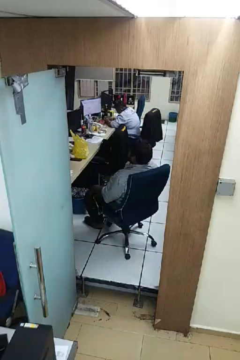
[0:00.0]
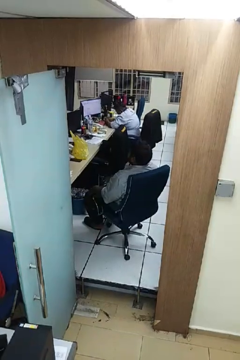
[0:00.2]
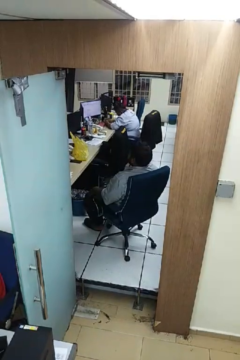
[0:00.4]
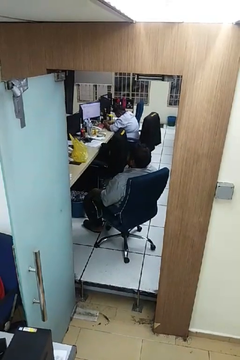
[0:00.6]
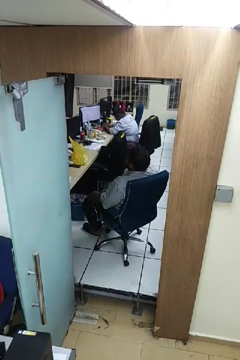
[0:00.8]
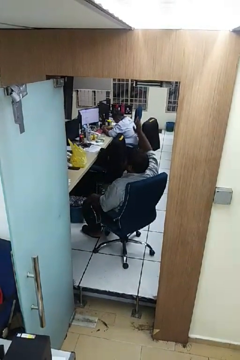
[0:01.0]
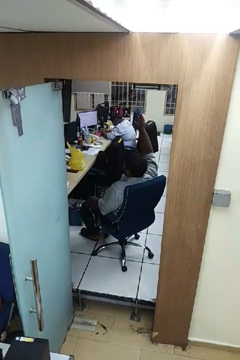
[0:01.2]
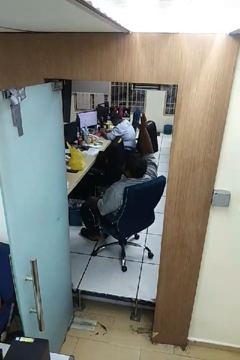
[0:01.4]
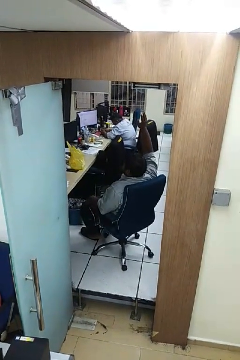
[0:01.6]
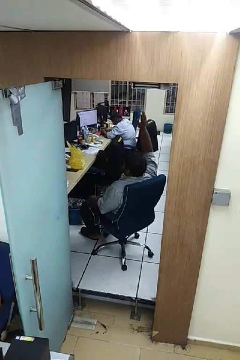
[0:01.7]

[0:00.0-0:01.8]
person gestures raise hand

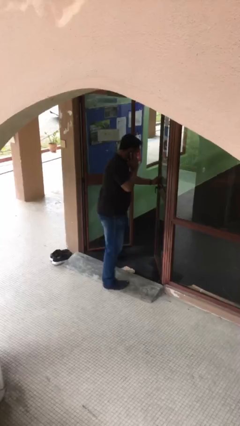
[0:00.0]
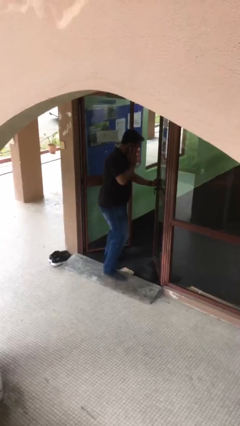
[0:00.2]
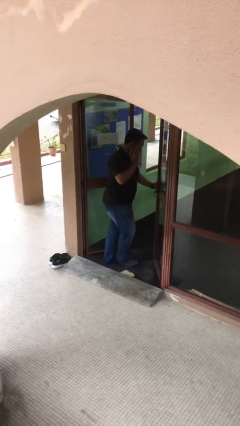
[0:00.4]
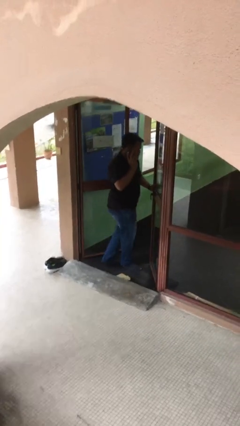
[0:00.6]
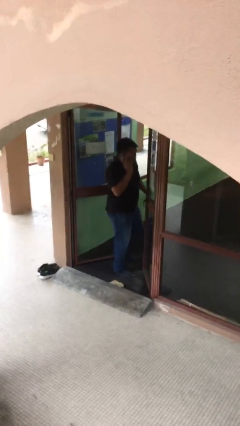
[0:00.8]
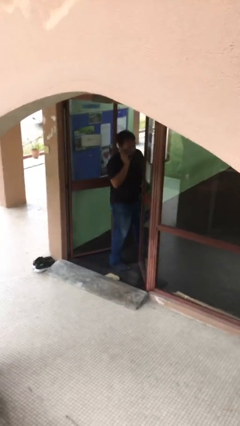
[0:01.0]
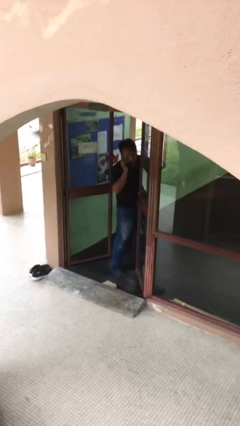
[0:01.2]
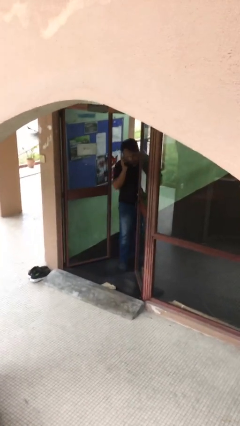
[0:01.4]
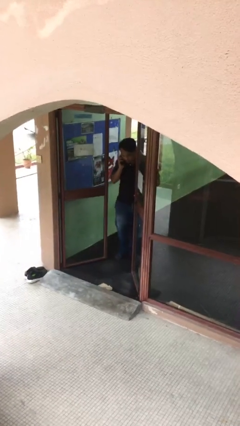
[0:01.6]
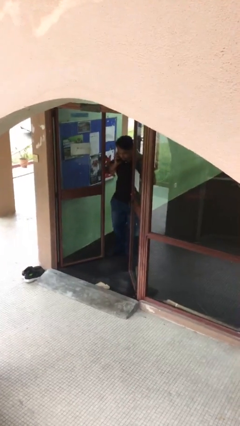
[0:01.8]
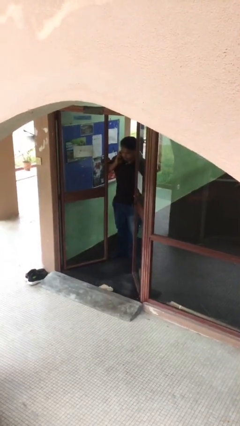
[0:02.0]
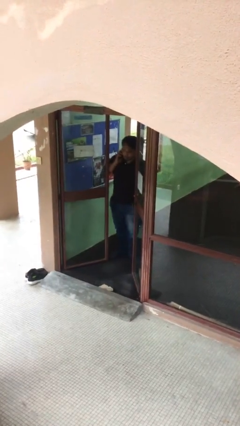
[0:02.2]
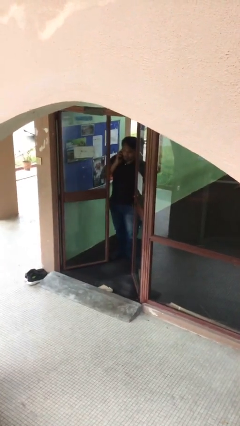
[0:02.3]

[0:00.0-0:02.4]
person exits scene through structure

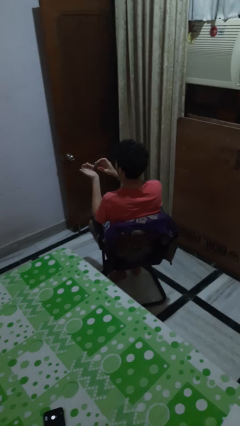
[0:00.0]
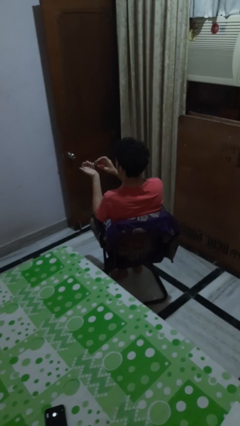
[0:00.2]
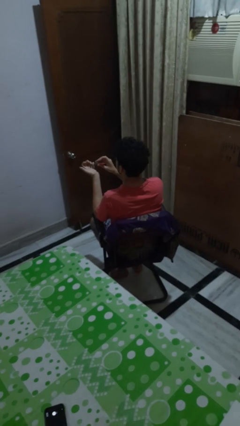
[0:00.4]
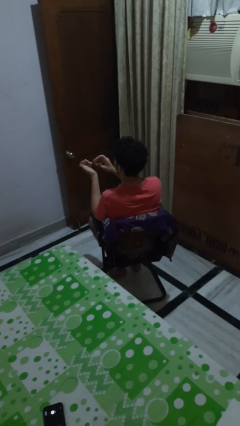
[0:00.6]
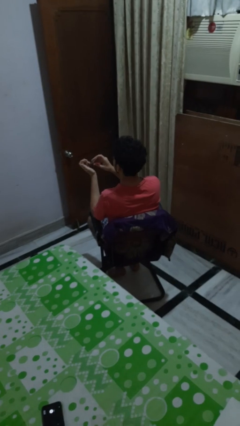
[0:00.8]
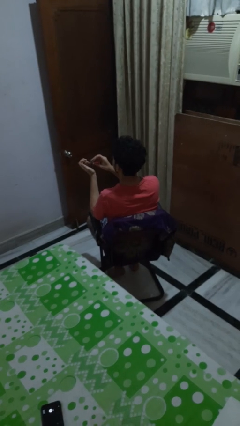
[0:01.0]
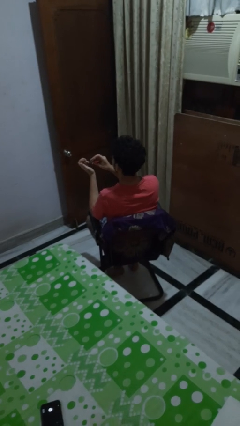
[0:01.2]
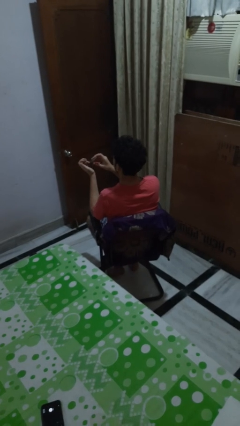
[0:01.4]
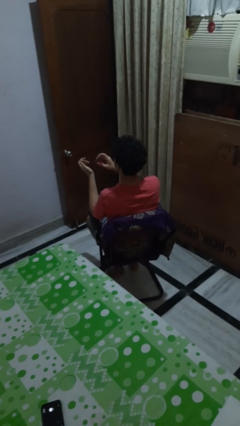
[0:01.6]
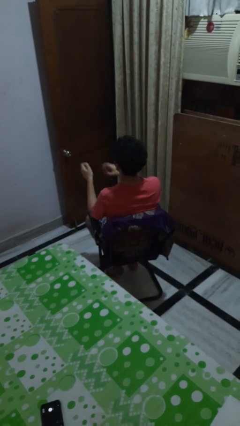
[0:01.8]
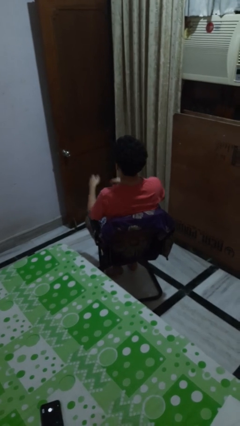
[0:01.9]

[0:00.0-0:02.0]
person clips fingernails

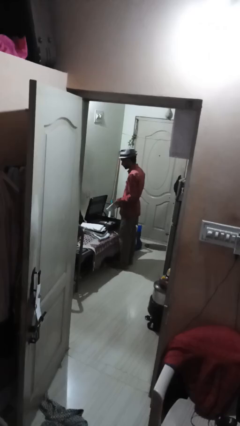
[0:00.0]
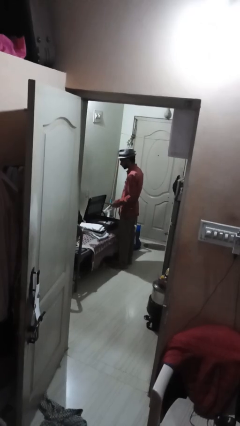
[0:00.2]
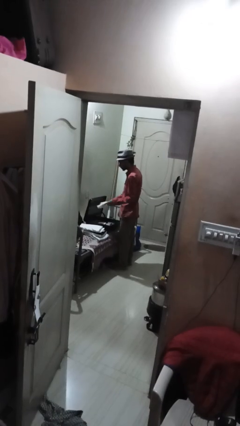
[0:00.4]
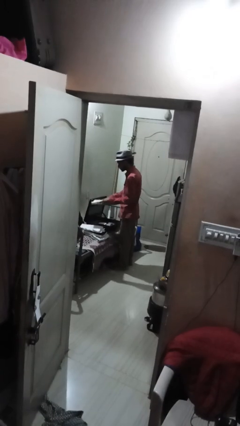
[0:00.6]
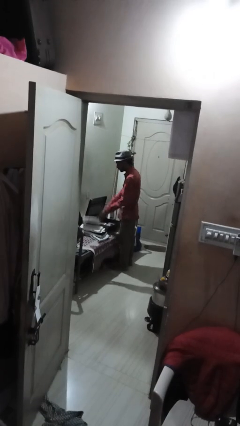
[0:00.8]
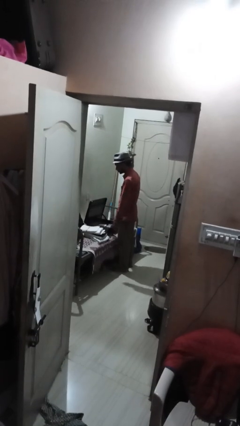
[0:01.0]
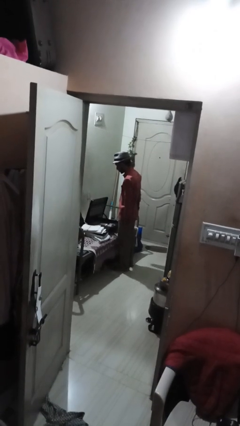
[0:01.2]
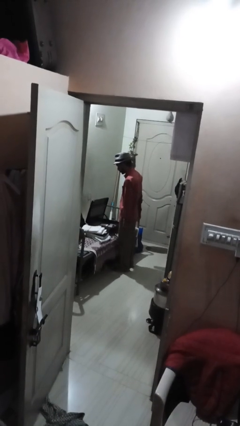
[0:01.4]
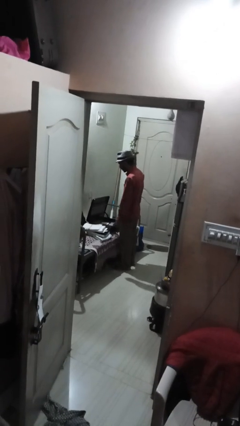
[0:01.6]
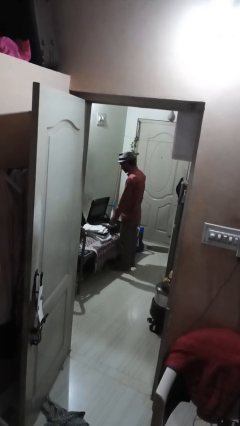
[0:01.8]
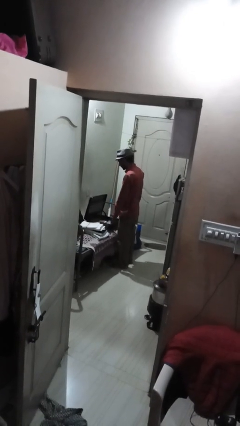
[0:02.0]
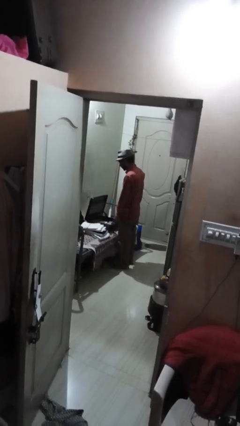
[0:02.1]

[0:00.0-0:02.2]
person unloads clothes from suitcase

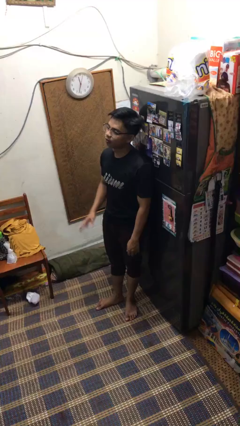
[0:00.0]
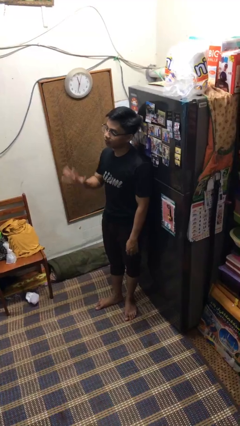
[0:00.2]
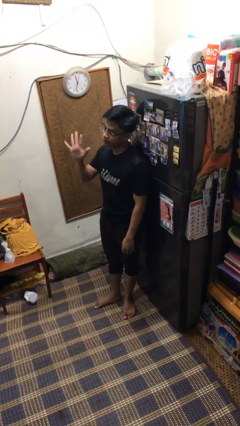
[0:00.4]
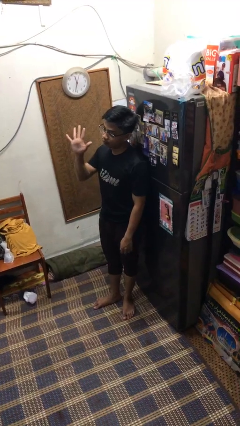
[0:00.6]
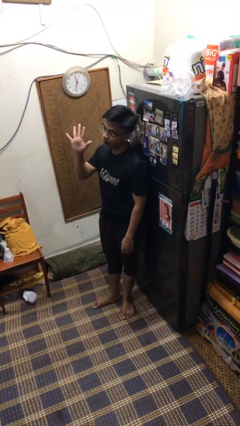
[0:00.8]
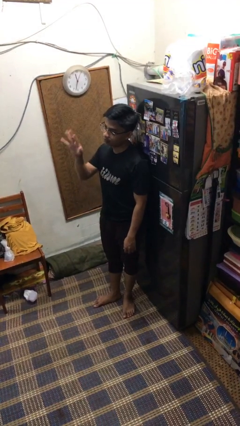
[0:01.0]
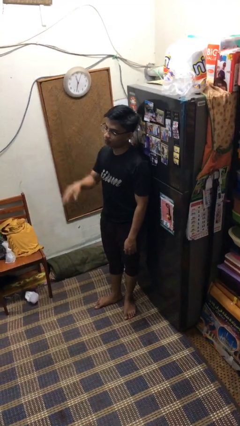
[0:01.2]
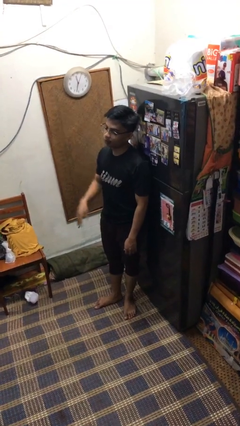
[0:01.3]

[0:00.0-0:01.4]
person gestures number five

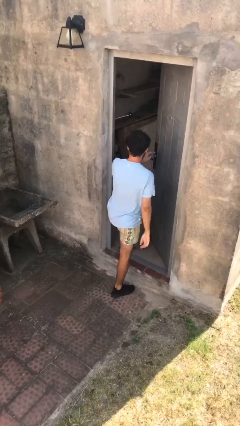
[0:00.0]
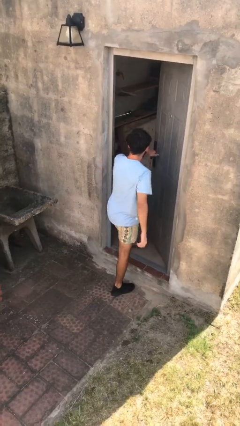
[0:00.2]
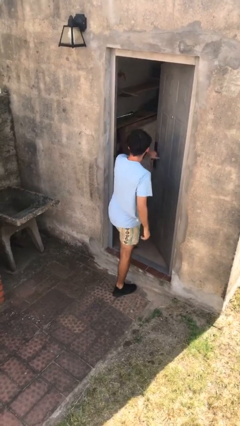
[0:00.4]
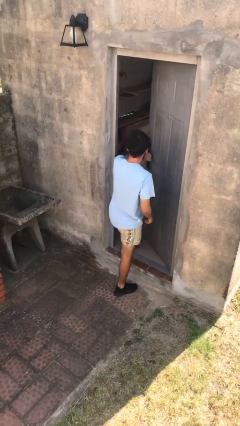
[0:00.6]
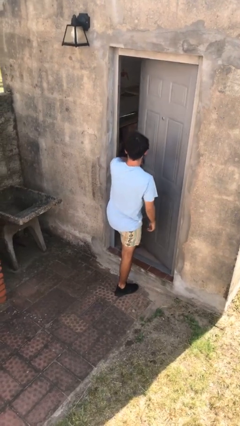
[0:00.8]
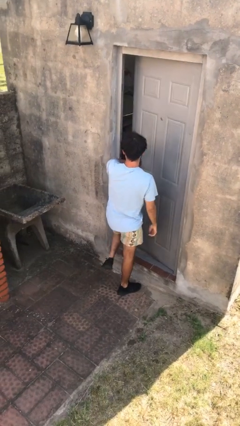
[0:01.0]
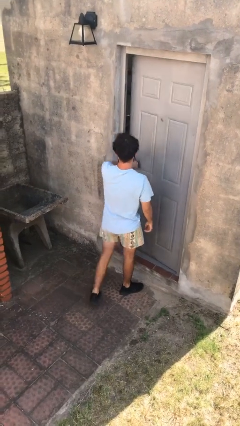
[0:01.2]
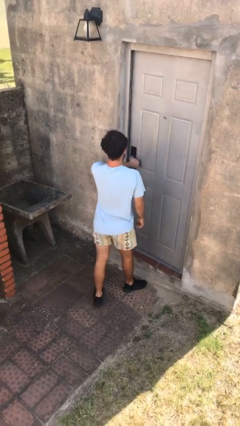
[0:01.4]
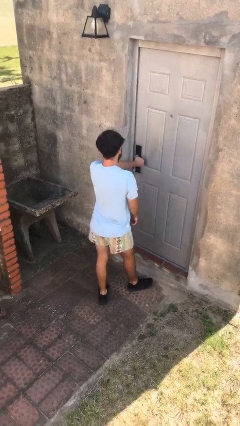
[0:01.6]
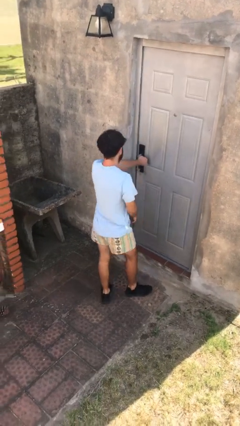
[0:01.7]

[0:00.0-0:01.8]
person closes facility door

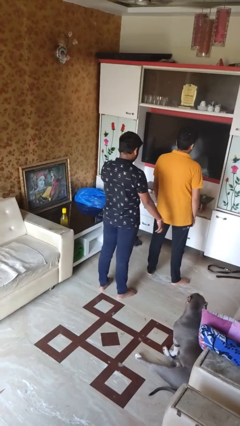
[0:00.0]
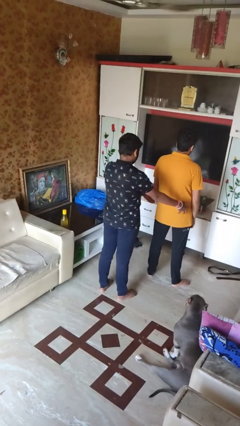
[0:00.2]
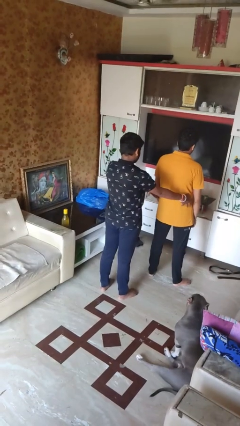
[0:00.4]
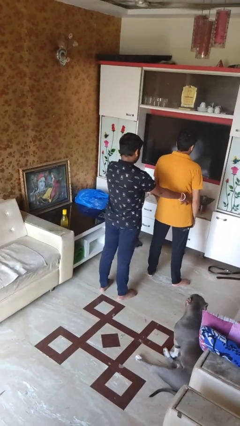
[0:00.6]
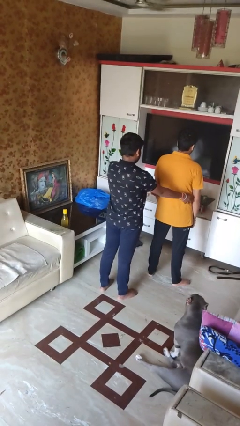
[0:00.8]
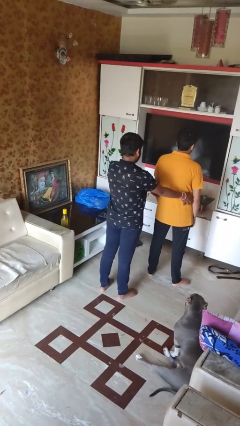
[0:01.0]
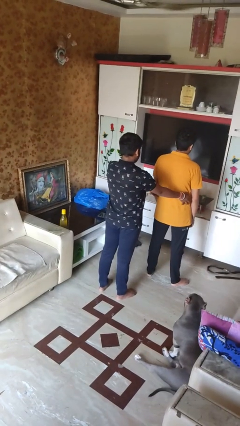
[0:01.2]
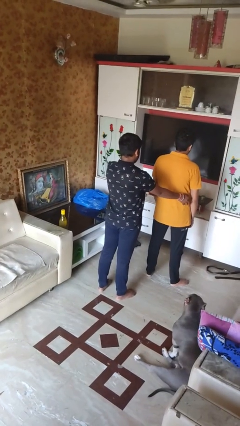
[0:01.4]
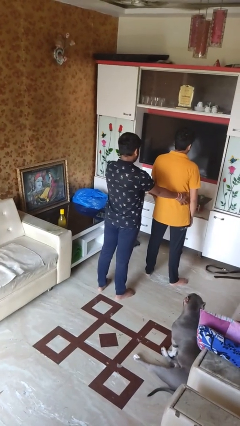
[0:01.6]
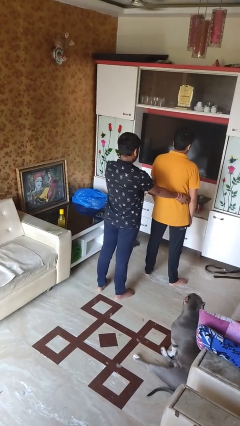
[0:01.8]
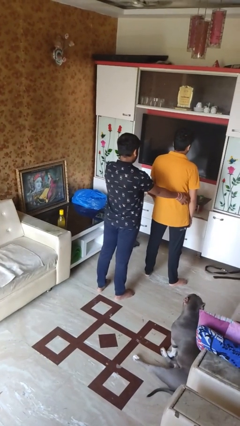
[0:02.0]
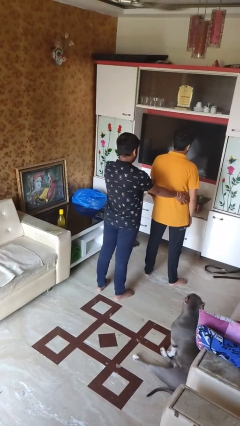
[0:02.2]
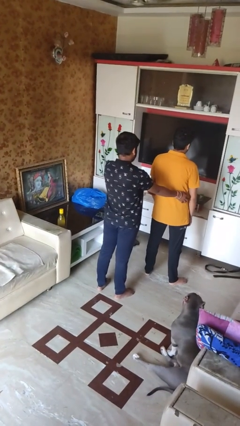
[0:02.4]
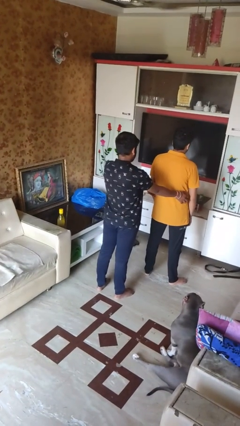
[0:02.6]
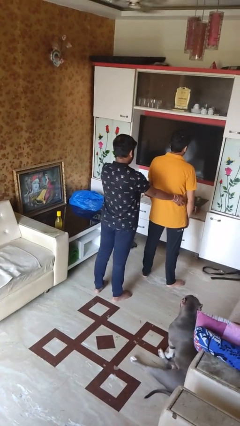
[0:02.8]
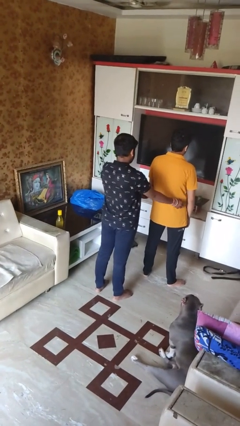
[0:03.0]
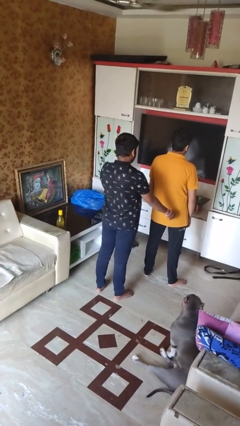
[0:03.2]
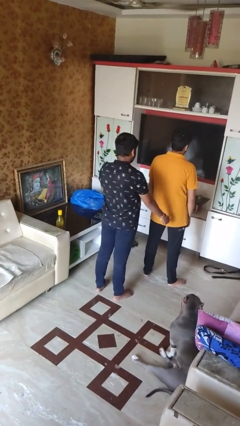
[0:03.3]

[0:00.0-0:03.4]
person tickles person

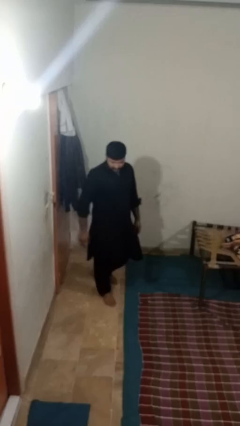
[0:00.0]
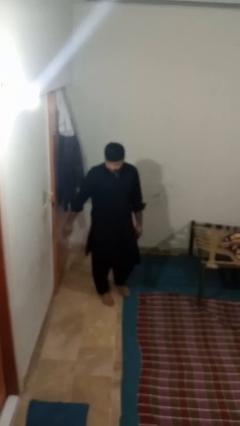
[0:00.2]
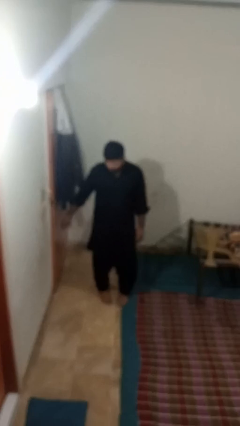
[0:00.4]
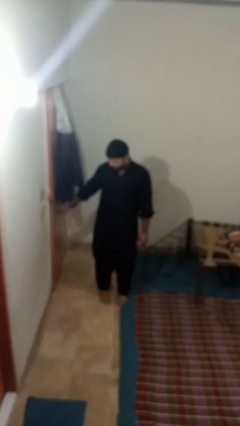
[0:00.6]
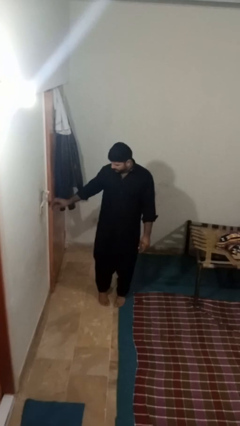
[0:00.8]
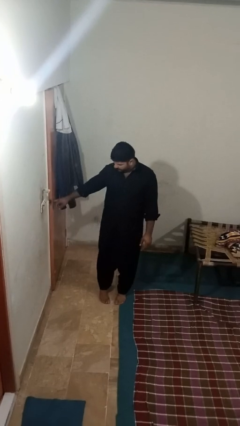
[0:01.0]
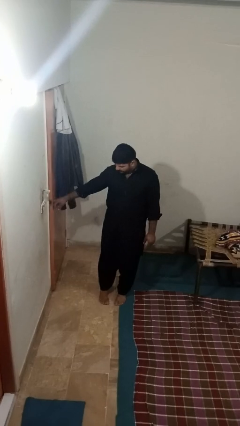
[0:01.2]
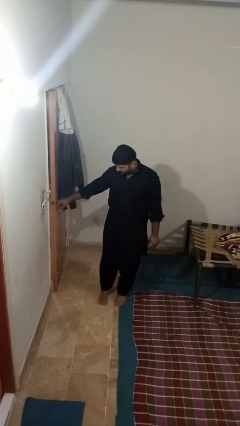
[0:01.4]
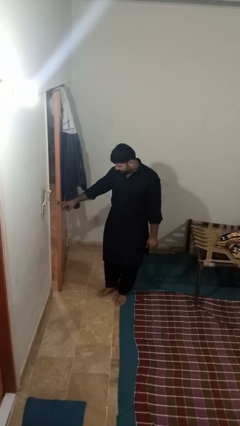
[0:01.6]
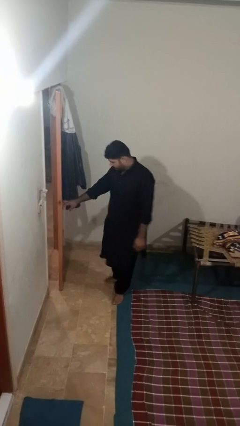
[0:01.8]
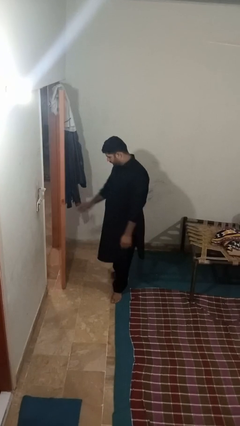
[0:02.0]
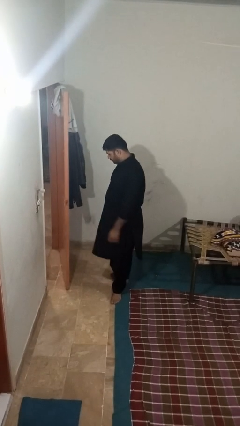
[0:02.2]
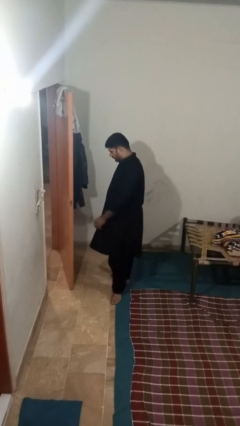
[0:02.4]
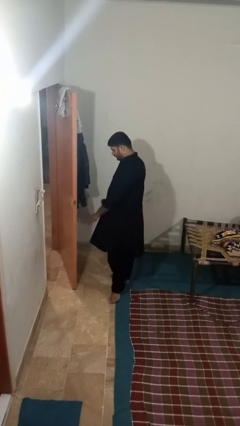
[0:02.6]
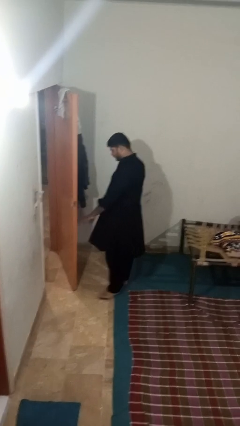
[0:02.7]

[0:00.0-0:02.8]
person opens facility door
